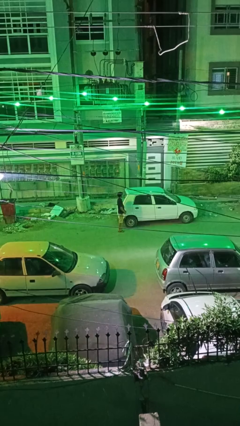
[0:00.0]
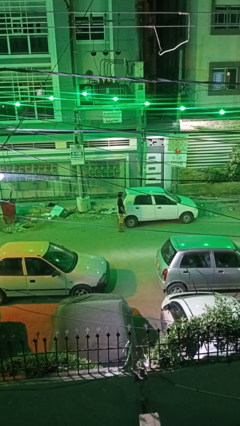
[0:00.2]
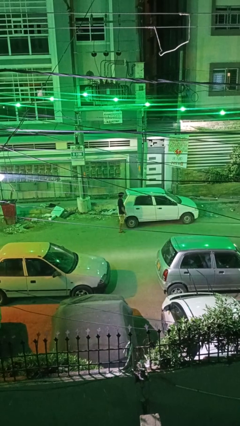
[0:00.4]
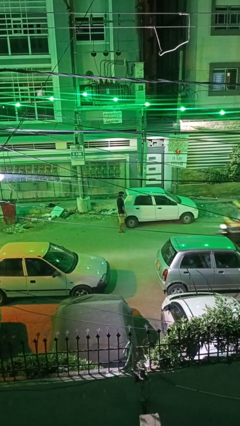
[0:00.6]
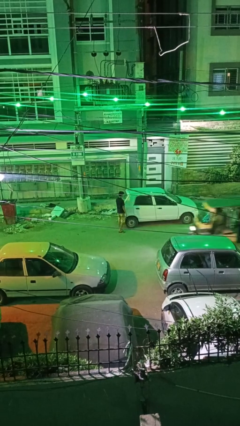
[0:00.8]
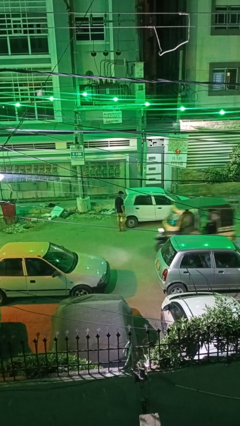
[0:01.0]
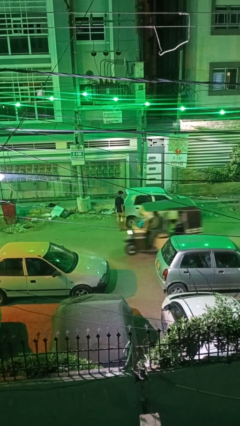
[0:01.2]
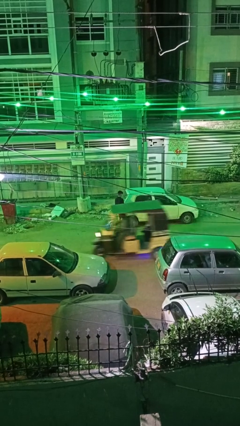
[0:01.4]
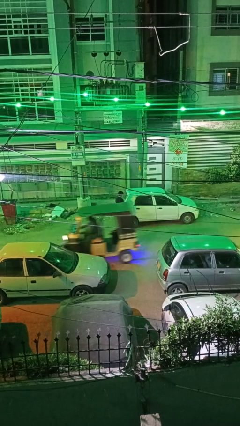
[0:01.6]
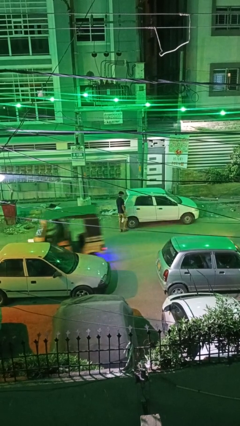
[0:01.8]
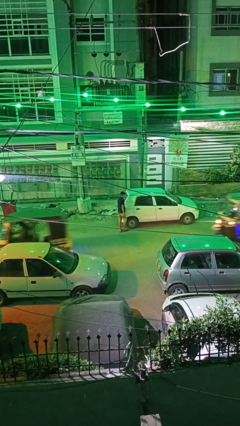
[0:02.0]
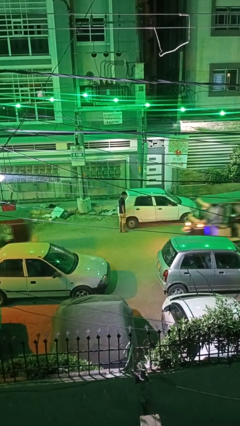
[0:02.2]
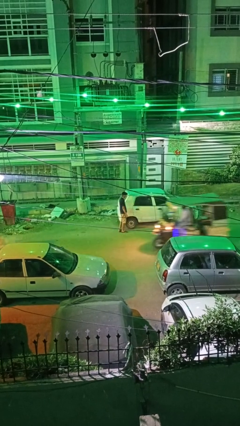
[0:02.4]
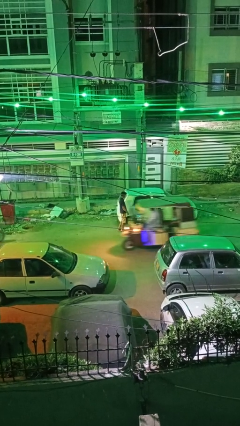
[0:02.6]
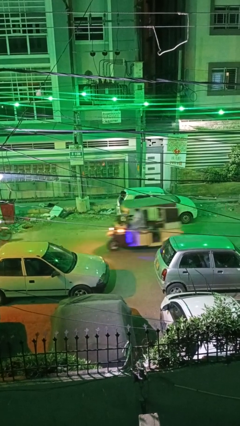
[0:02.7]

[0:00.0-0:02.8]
person kicks car tires

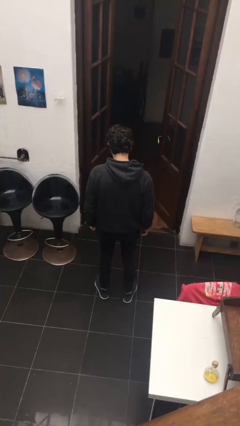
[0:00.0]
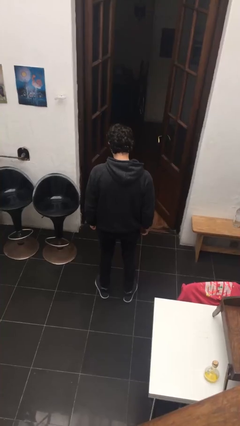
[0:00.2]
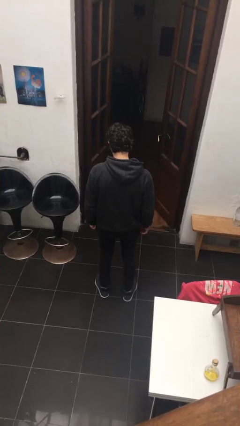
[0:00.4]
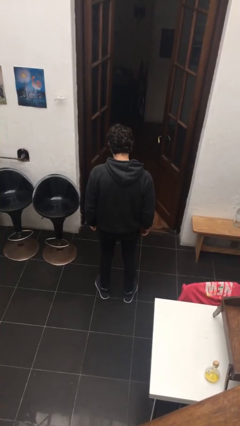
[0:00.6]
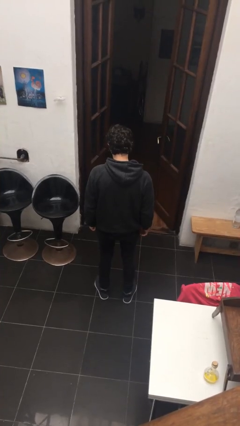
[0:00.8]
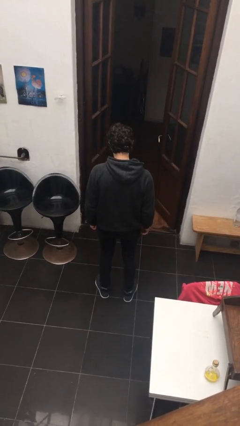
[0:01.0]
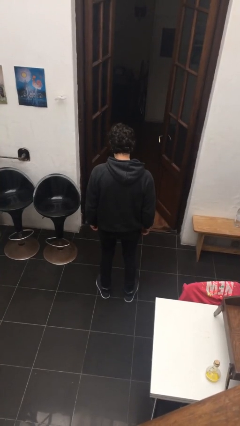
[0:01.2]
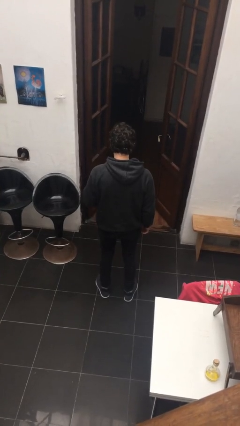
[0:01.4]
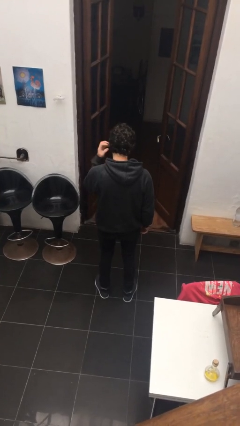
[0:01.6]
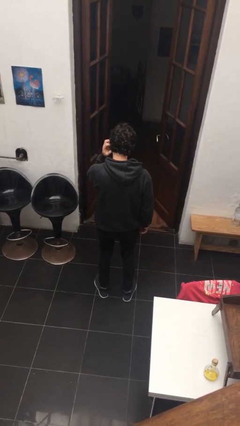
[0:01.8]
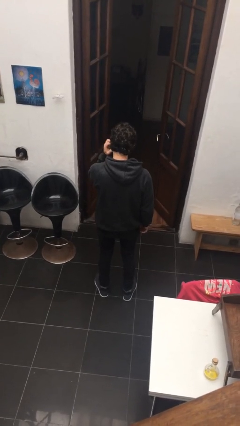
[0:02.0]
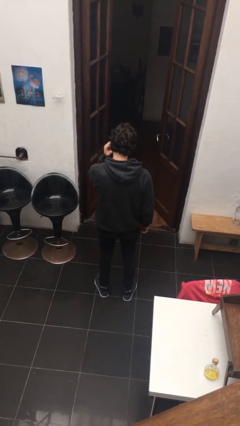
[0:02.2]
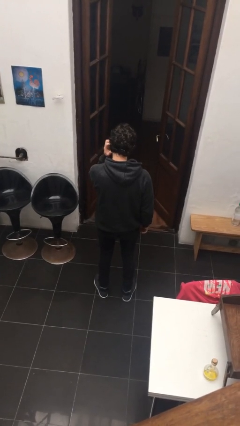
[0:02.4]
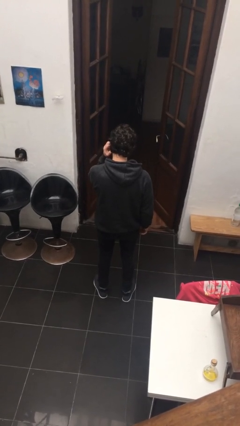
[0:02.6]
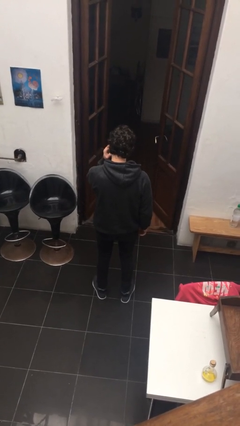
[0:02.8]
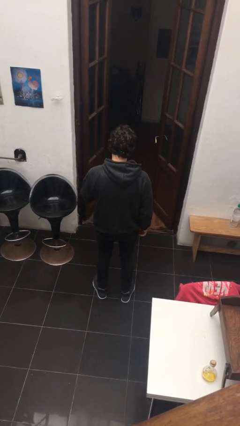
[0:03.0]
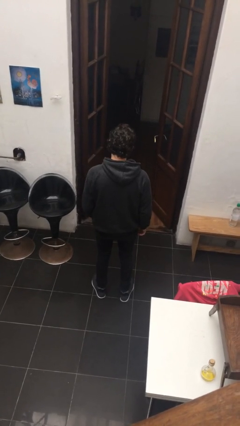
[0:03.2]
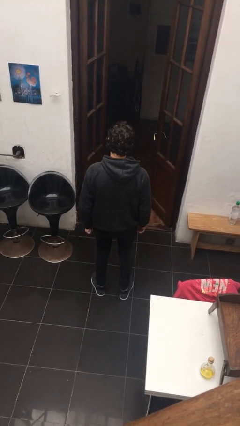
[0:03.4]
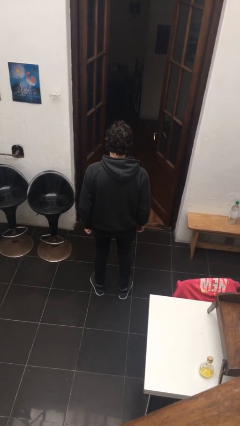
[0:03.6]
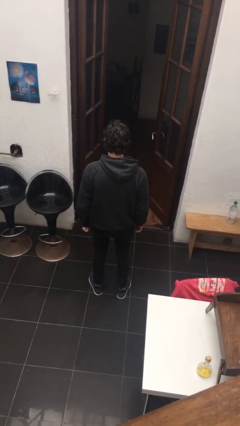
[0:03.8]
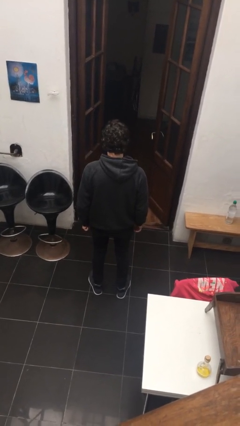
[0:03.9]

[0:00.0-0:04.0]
person scratches face

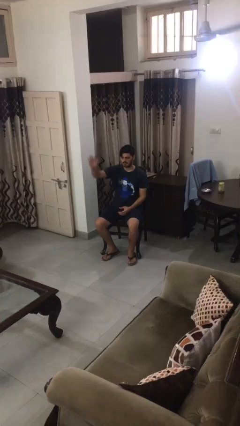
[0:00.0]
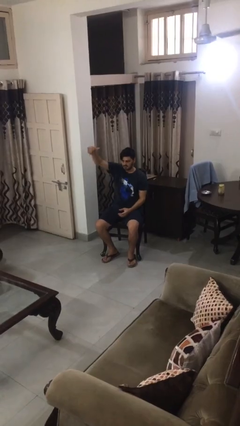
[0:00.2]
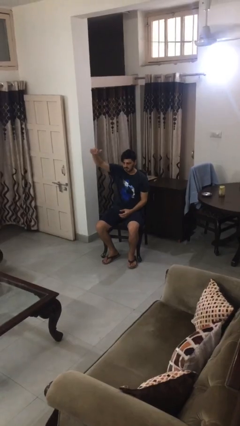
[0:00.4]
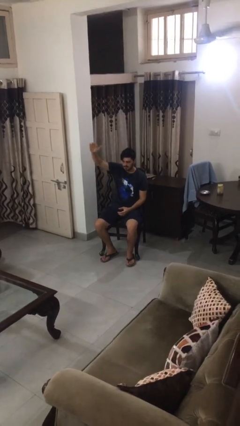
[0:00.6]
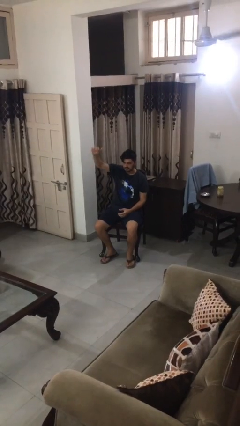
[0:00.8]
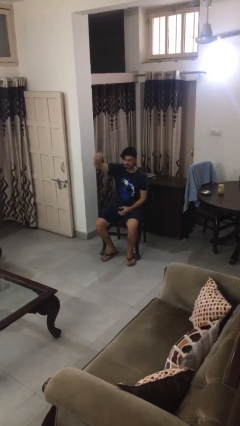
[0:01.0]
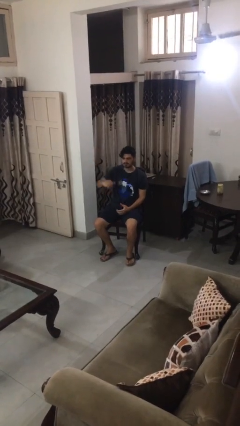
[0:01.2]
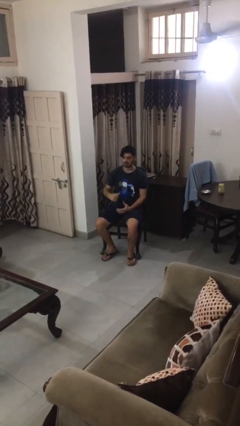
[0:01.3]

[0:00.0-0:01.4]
person gestures come here

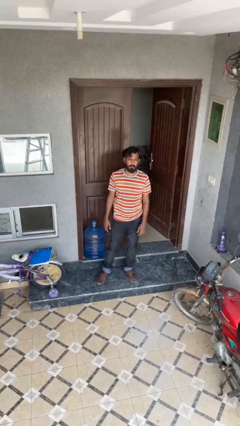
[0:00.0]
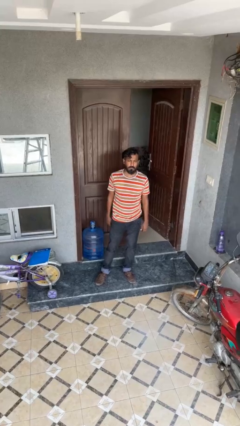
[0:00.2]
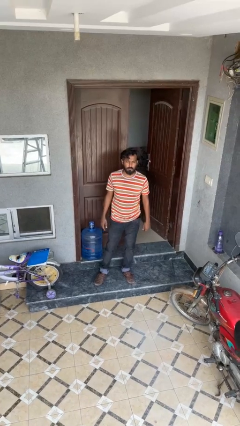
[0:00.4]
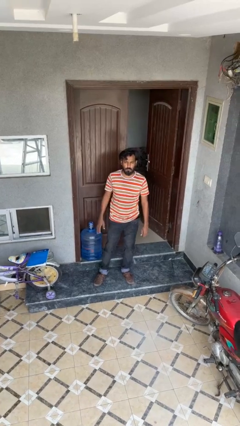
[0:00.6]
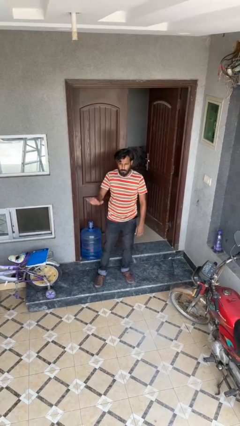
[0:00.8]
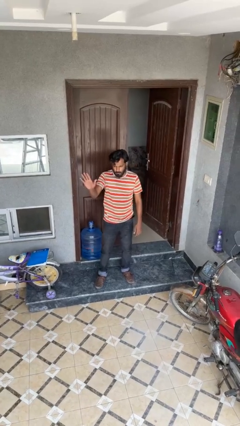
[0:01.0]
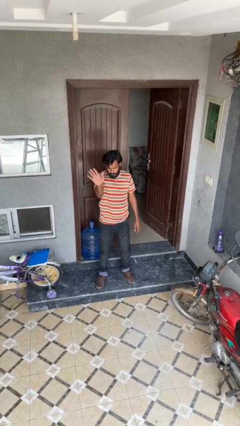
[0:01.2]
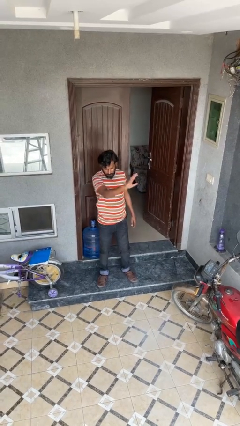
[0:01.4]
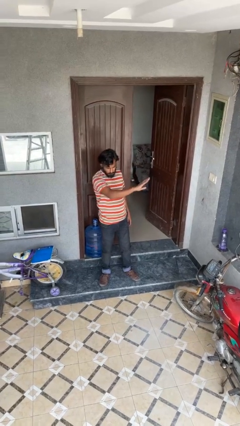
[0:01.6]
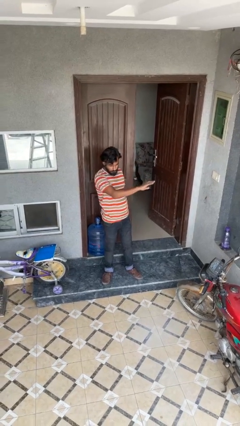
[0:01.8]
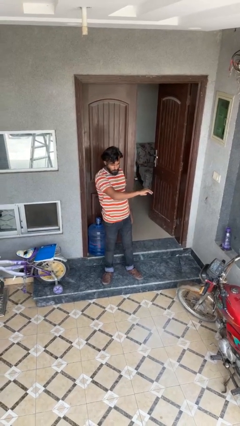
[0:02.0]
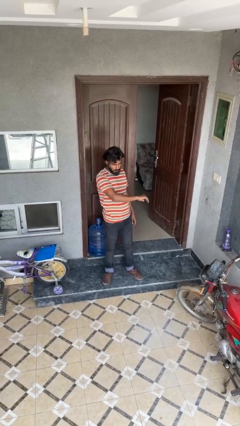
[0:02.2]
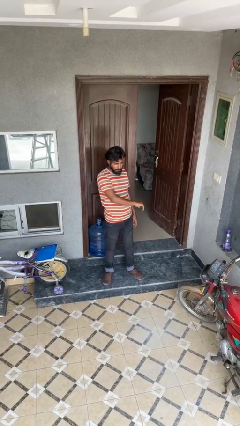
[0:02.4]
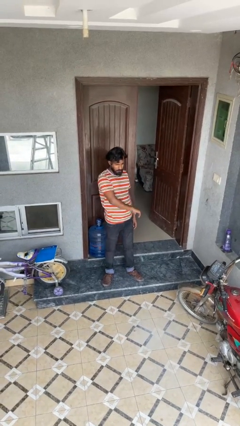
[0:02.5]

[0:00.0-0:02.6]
person gestures swipe left

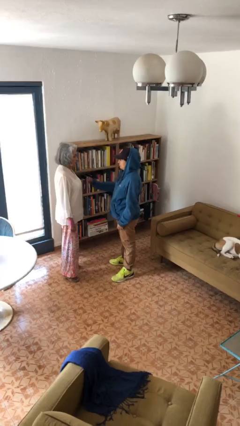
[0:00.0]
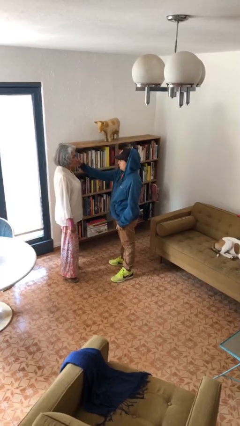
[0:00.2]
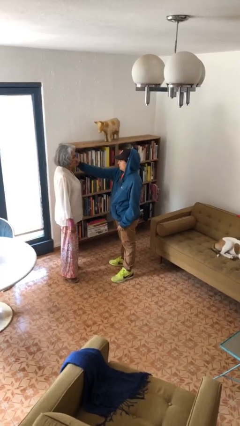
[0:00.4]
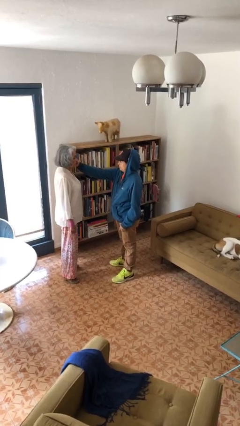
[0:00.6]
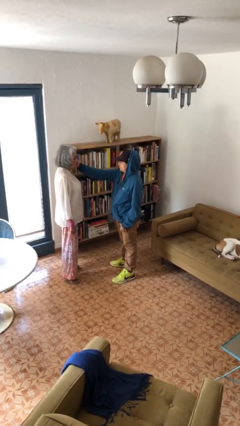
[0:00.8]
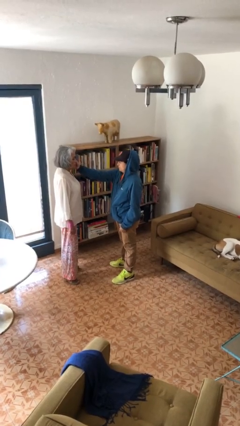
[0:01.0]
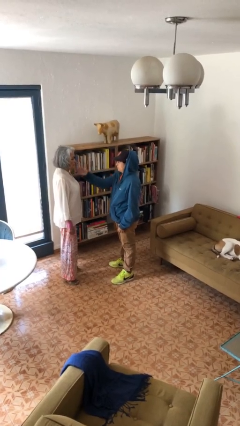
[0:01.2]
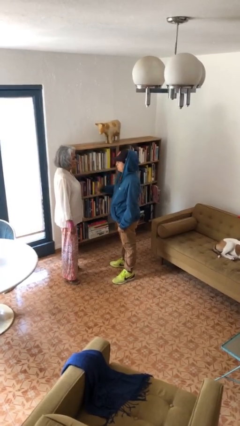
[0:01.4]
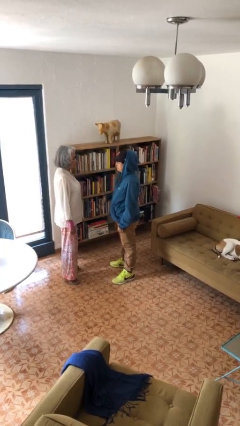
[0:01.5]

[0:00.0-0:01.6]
person touches face of person

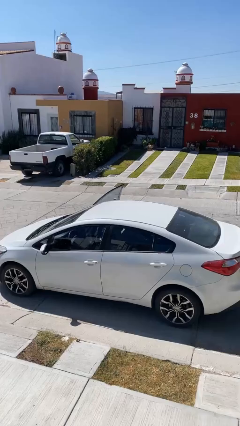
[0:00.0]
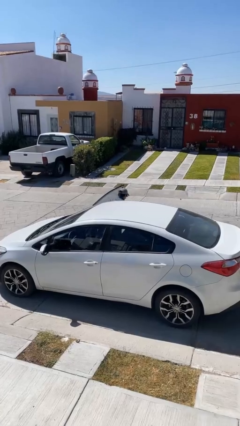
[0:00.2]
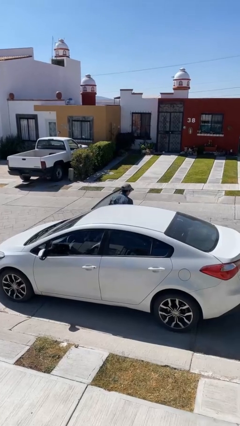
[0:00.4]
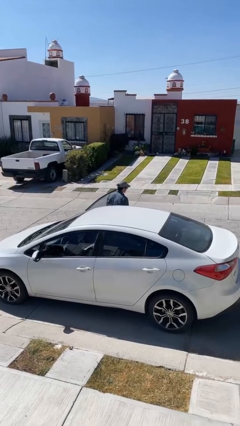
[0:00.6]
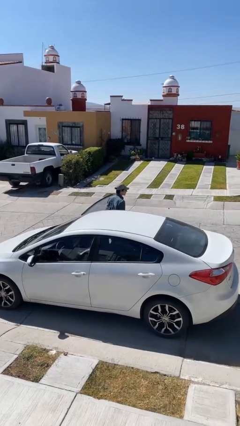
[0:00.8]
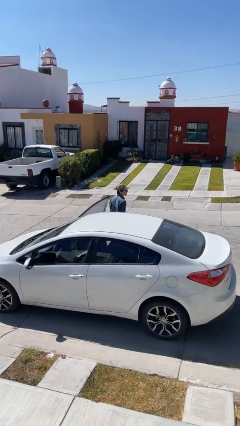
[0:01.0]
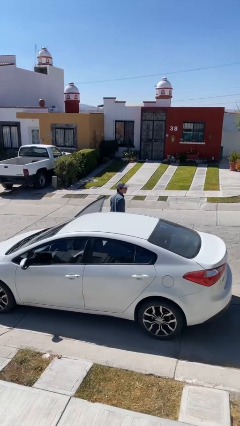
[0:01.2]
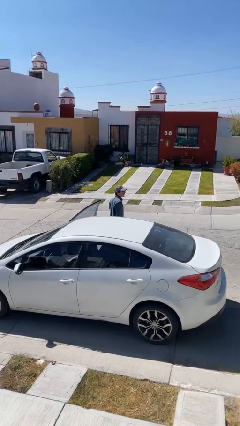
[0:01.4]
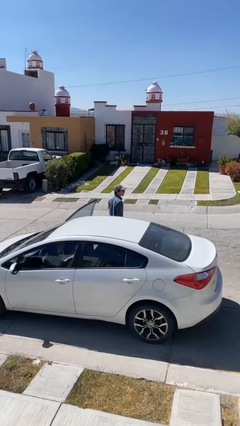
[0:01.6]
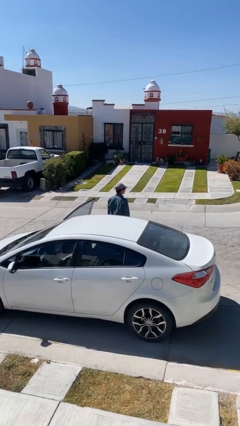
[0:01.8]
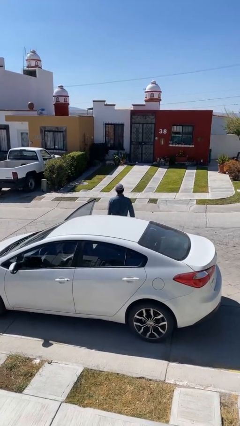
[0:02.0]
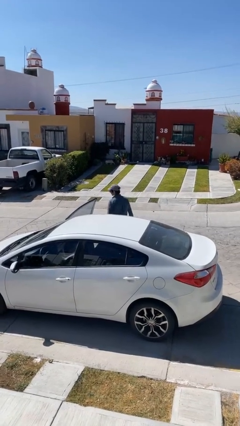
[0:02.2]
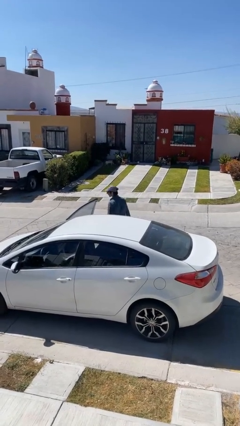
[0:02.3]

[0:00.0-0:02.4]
person exits car

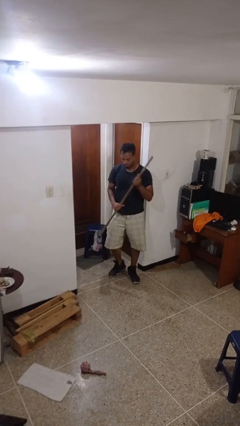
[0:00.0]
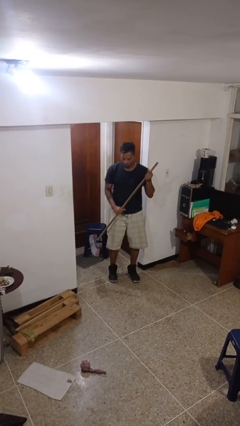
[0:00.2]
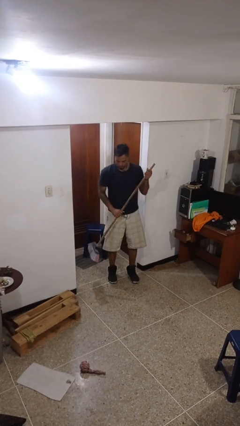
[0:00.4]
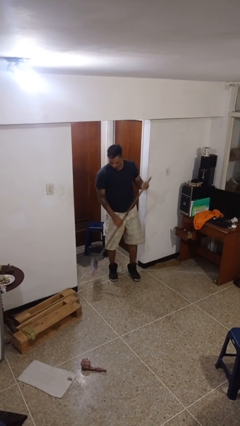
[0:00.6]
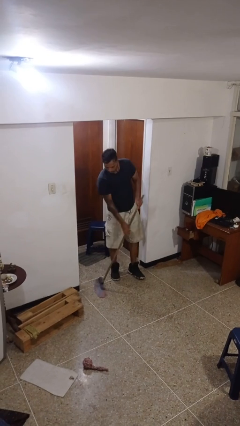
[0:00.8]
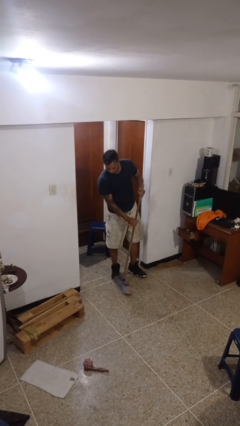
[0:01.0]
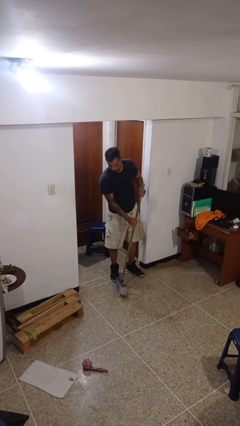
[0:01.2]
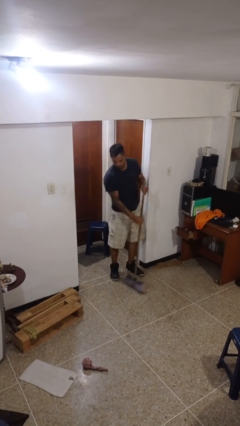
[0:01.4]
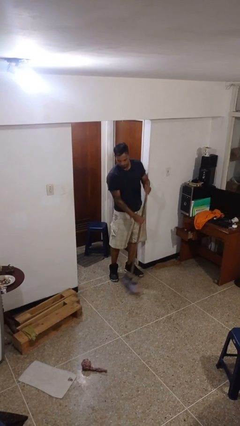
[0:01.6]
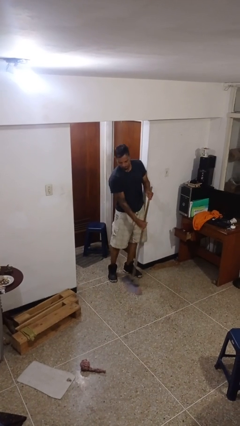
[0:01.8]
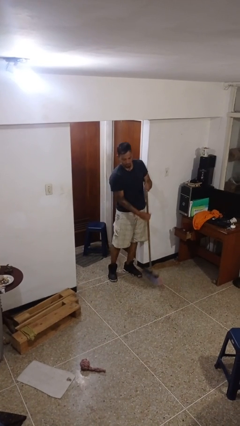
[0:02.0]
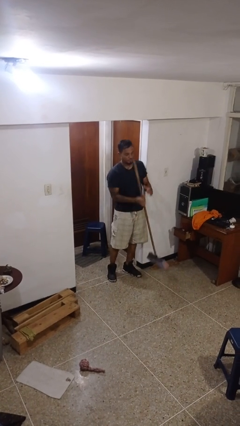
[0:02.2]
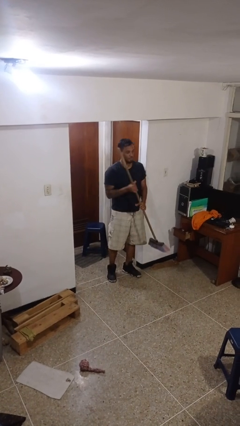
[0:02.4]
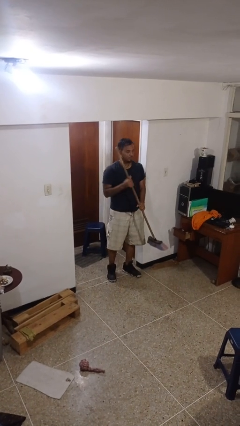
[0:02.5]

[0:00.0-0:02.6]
person sweeps floor
